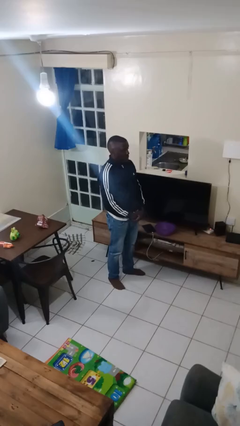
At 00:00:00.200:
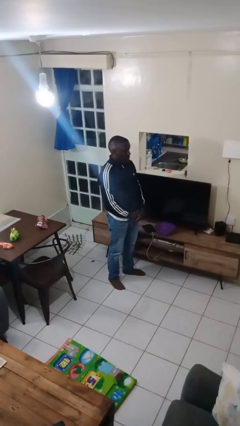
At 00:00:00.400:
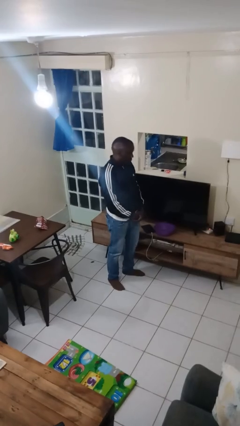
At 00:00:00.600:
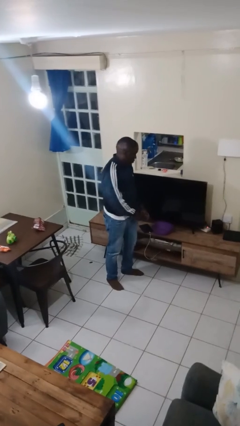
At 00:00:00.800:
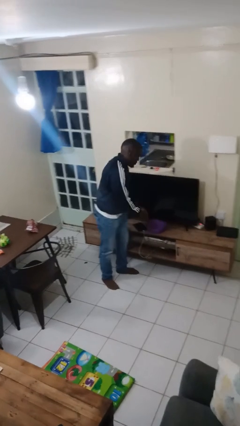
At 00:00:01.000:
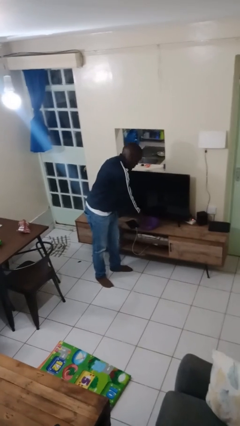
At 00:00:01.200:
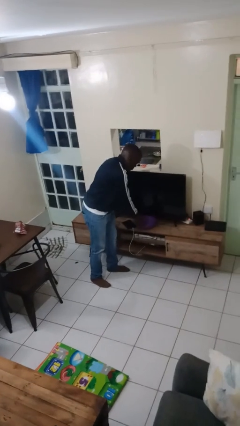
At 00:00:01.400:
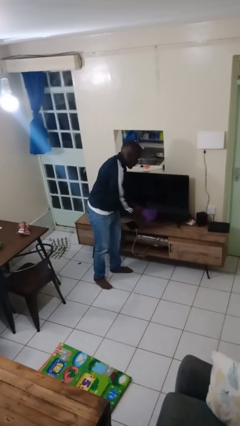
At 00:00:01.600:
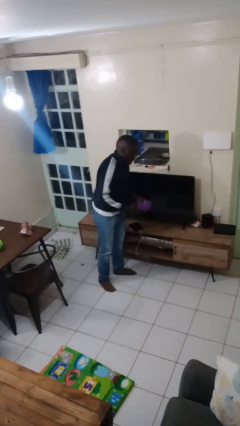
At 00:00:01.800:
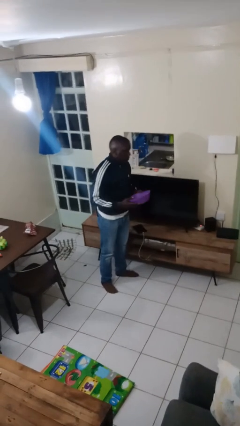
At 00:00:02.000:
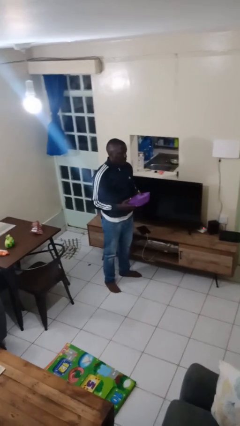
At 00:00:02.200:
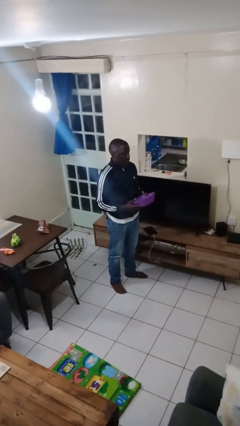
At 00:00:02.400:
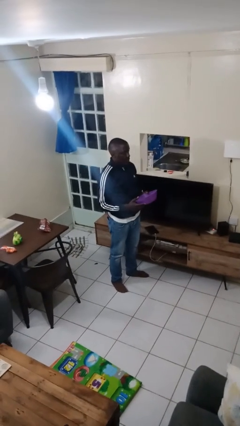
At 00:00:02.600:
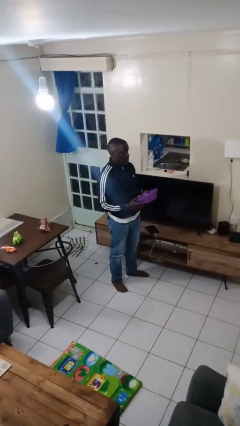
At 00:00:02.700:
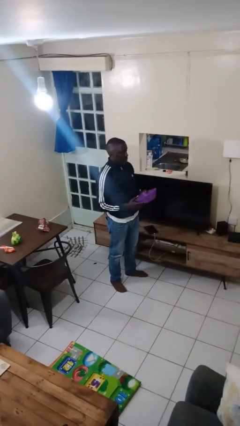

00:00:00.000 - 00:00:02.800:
person picks up object from countertop

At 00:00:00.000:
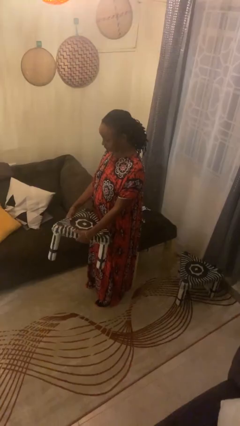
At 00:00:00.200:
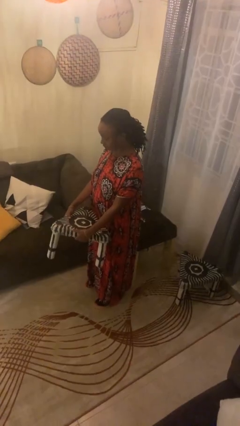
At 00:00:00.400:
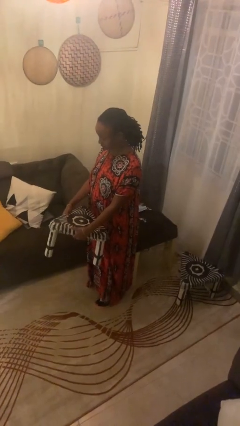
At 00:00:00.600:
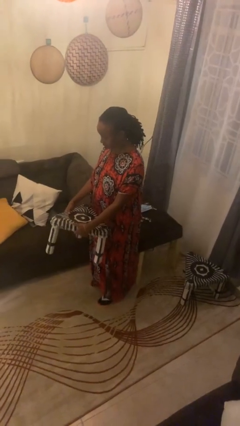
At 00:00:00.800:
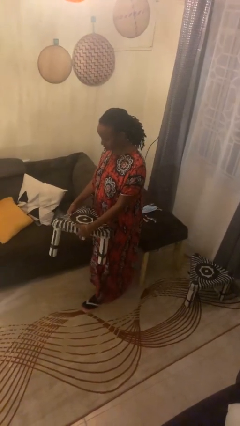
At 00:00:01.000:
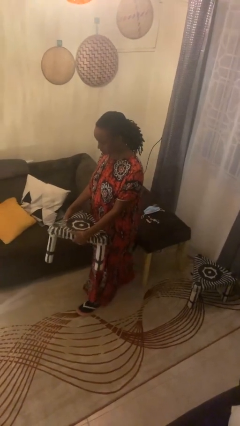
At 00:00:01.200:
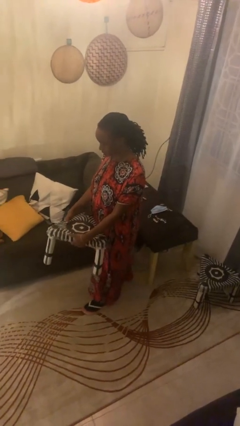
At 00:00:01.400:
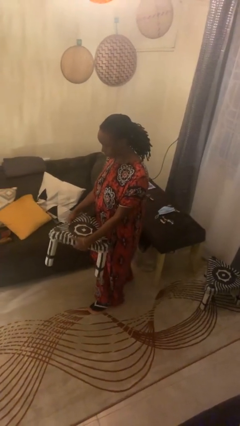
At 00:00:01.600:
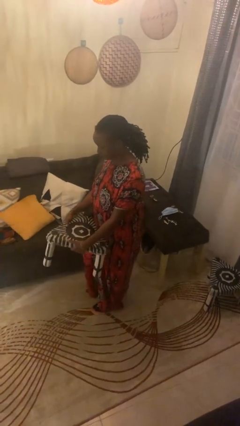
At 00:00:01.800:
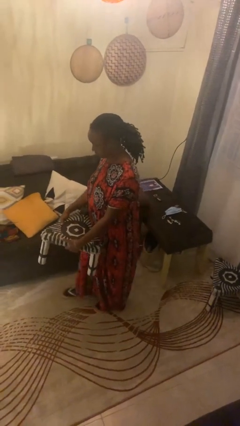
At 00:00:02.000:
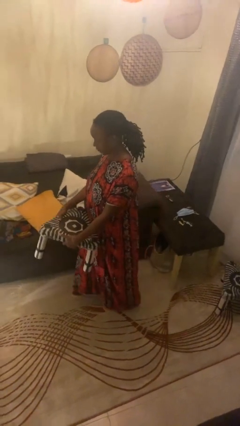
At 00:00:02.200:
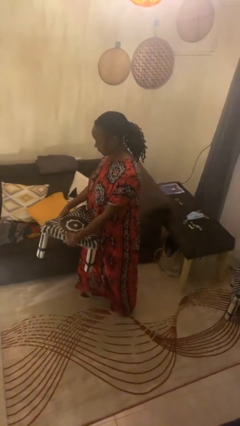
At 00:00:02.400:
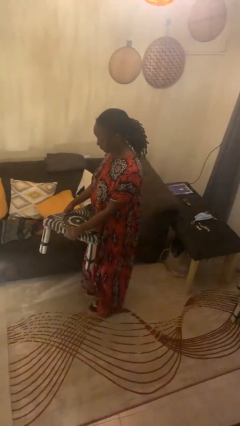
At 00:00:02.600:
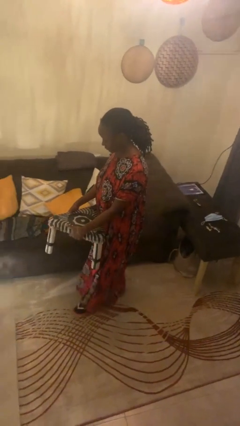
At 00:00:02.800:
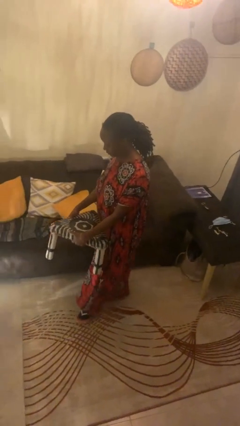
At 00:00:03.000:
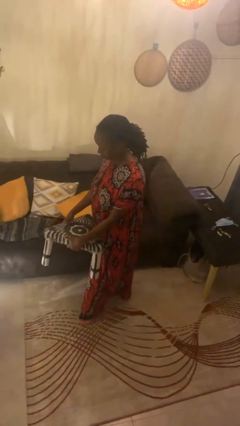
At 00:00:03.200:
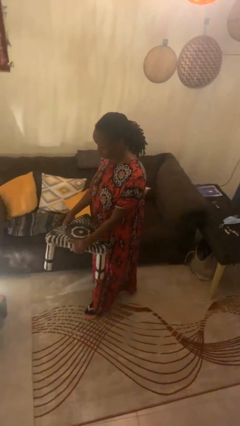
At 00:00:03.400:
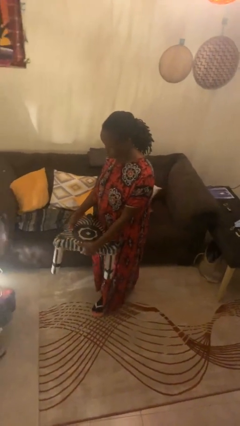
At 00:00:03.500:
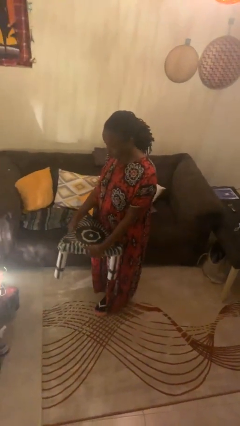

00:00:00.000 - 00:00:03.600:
person carries furniture

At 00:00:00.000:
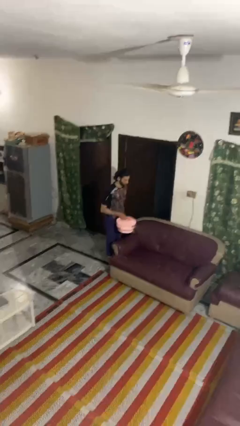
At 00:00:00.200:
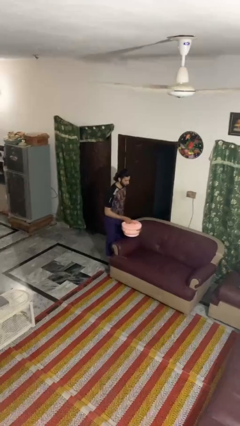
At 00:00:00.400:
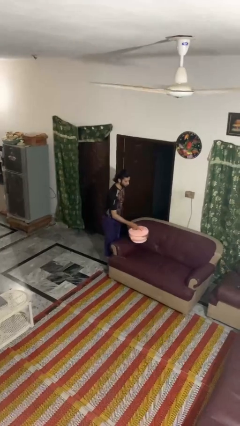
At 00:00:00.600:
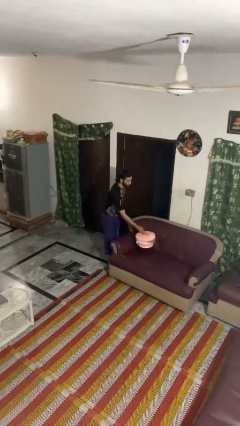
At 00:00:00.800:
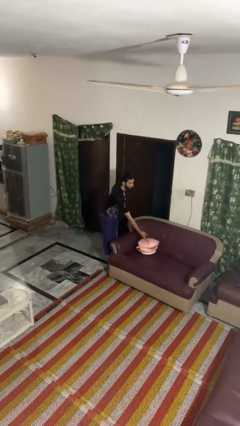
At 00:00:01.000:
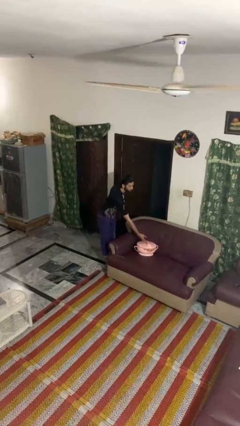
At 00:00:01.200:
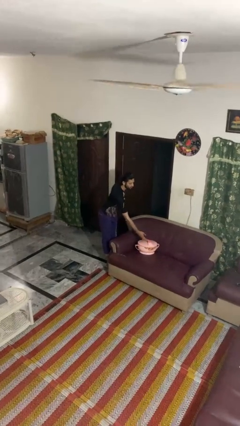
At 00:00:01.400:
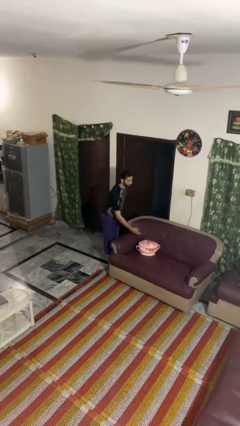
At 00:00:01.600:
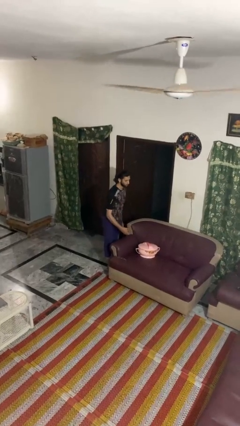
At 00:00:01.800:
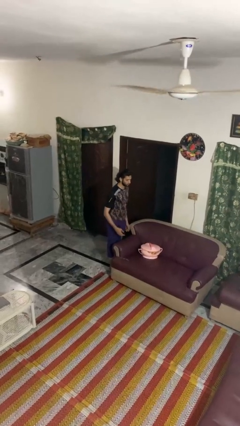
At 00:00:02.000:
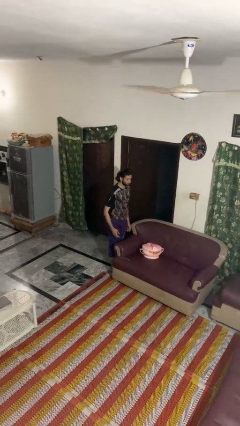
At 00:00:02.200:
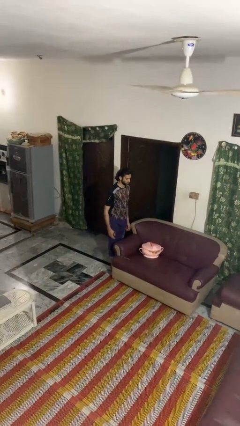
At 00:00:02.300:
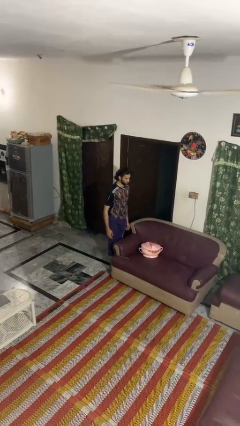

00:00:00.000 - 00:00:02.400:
person puts down object on couch

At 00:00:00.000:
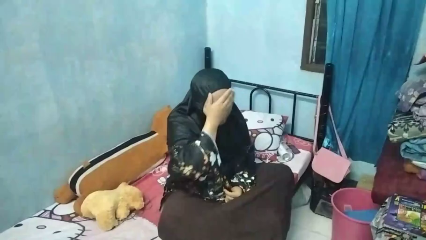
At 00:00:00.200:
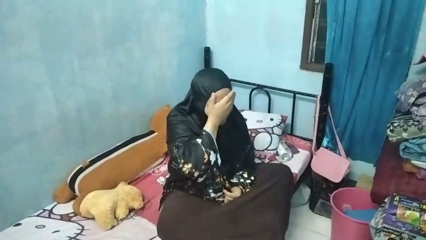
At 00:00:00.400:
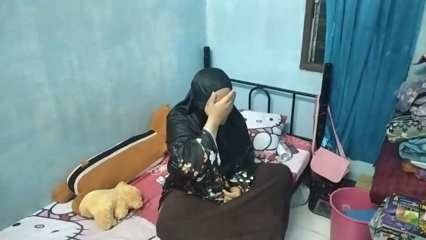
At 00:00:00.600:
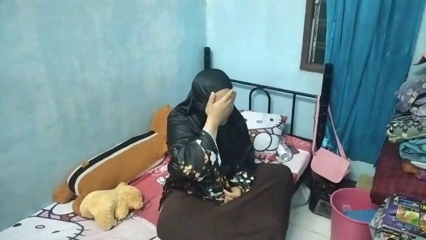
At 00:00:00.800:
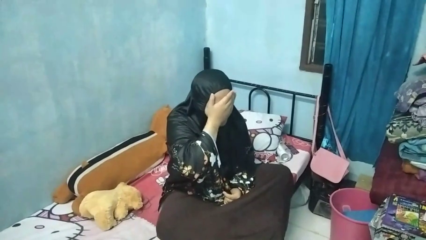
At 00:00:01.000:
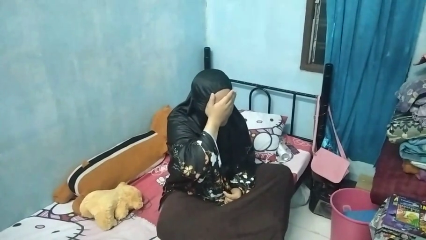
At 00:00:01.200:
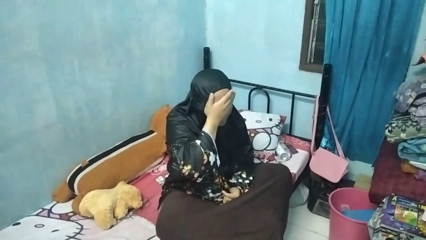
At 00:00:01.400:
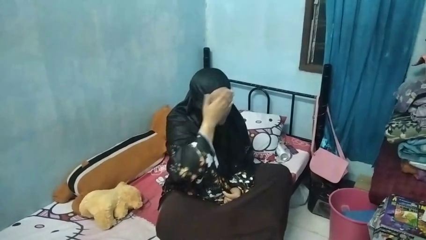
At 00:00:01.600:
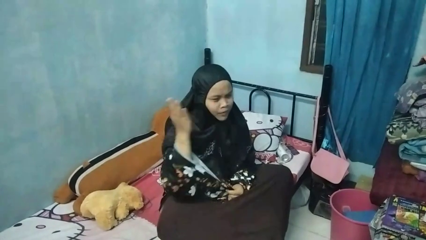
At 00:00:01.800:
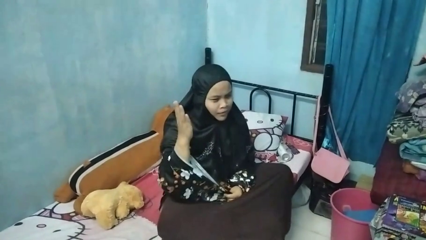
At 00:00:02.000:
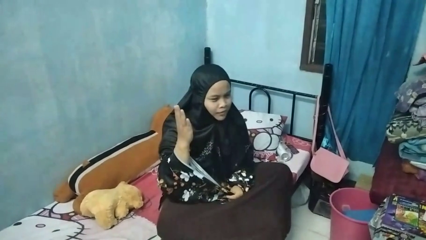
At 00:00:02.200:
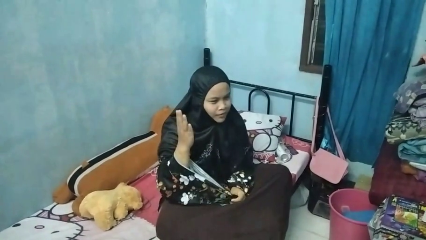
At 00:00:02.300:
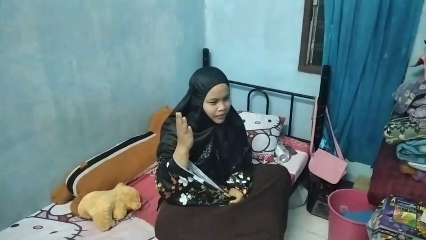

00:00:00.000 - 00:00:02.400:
person covers face with hands

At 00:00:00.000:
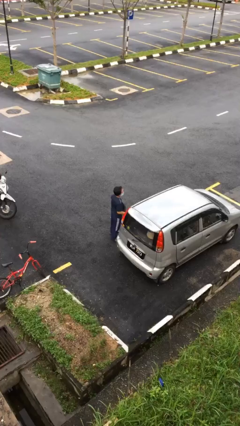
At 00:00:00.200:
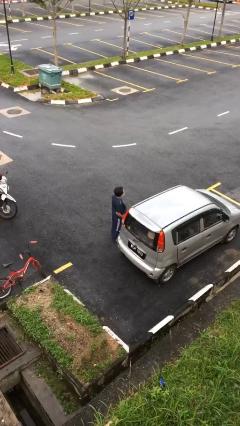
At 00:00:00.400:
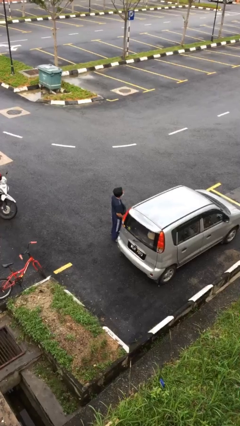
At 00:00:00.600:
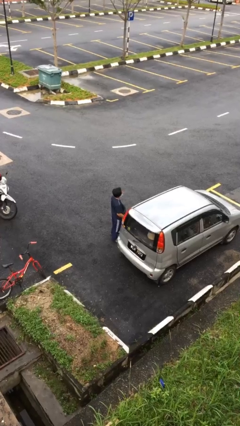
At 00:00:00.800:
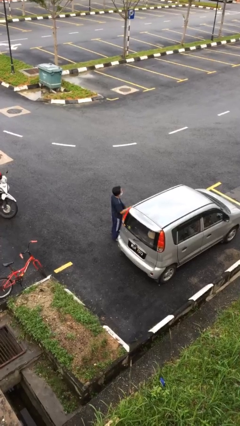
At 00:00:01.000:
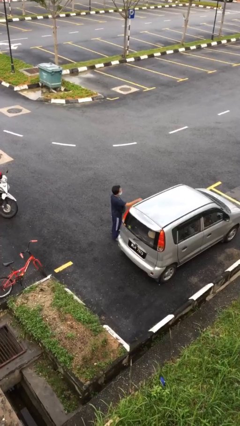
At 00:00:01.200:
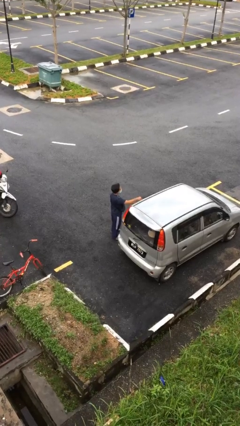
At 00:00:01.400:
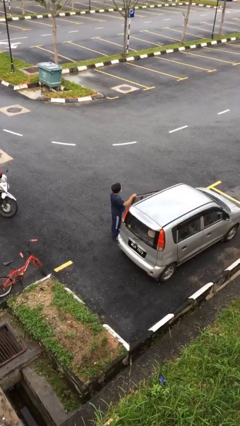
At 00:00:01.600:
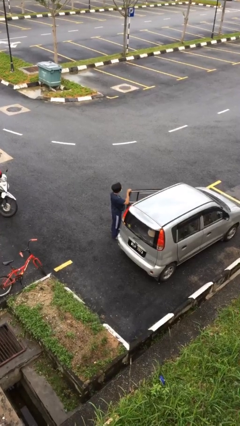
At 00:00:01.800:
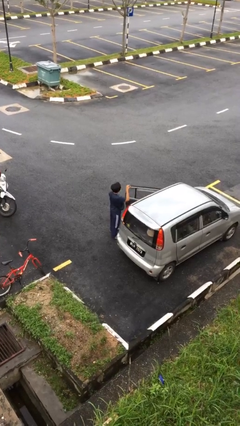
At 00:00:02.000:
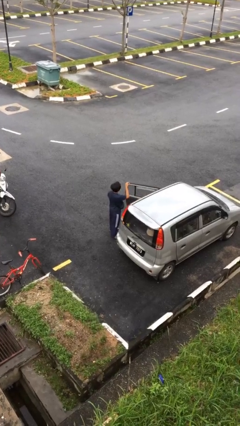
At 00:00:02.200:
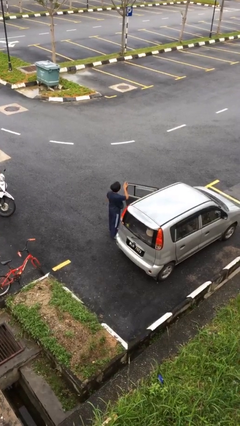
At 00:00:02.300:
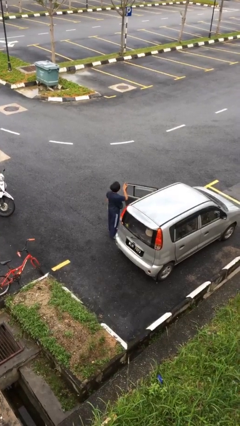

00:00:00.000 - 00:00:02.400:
person opens car door

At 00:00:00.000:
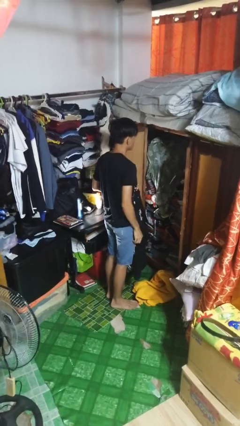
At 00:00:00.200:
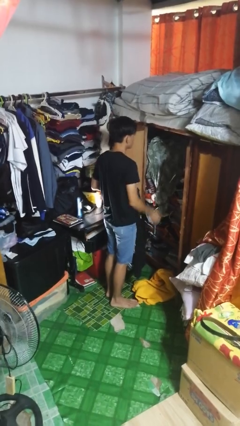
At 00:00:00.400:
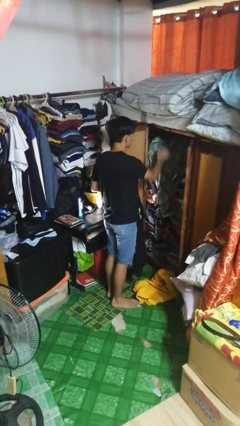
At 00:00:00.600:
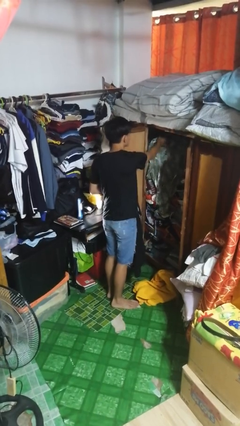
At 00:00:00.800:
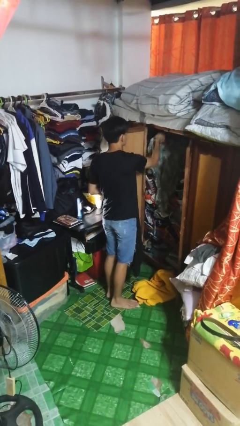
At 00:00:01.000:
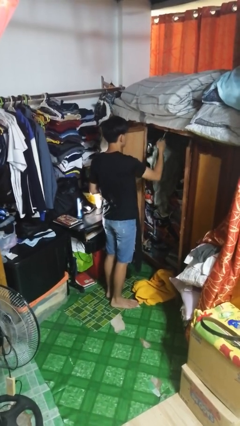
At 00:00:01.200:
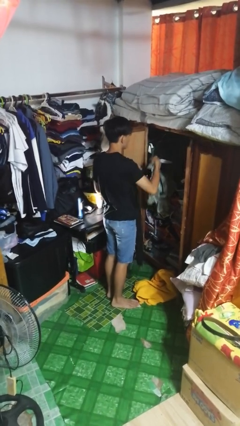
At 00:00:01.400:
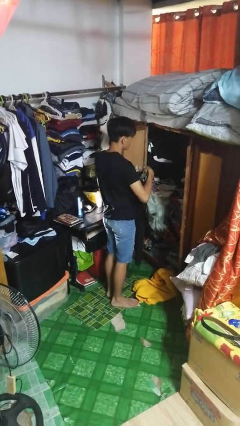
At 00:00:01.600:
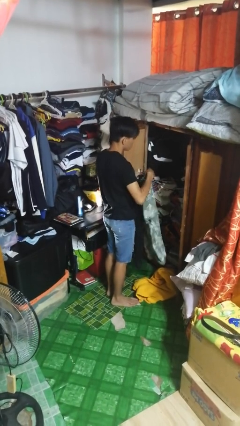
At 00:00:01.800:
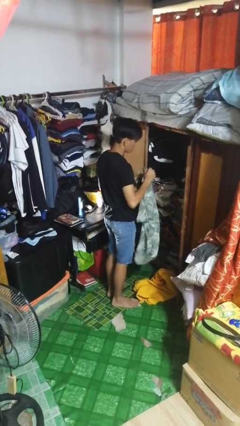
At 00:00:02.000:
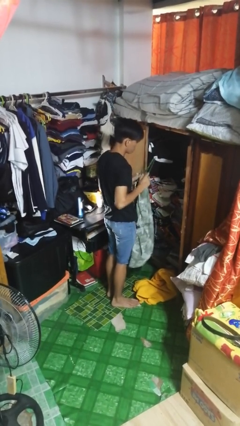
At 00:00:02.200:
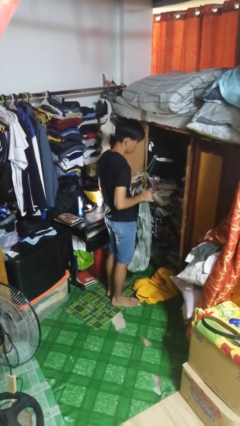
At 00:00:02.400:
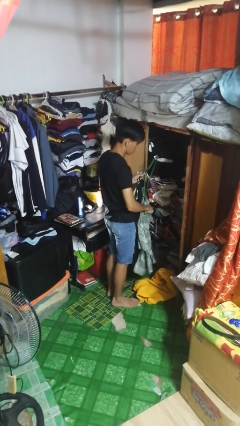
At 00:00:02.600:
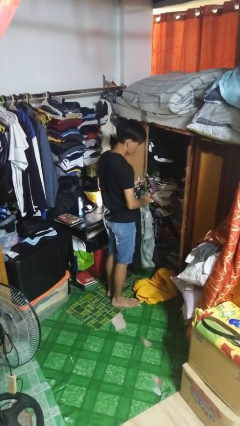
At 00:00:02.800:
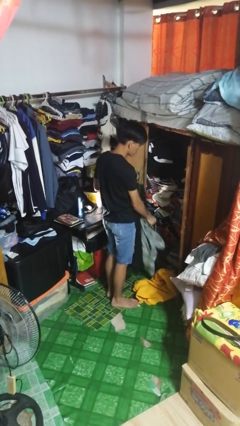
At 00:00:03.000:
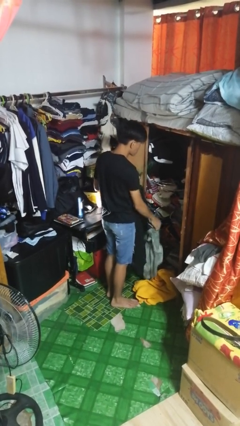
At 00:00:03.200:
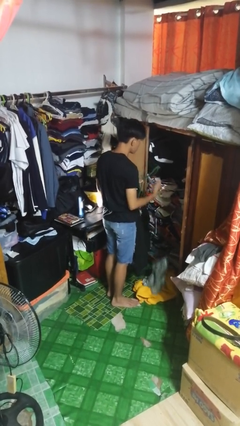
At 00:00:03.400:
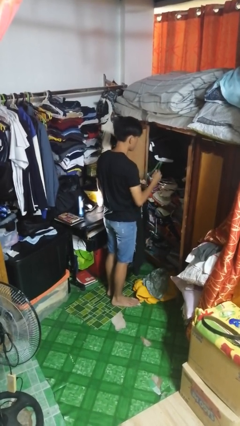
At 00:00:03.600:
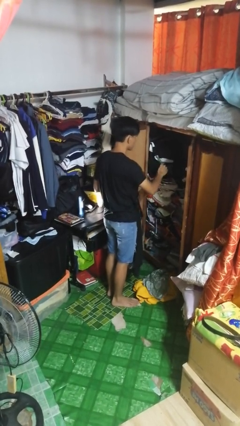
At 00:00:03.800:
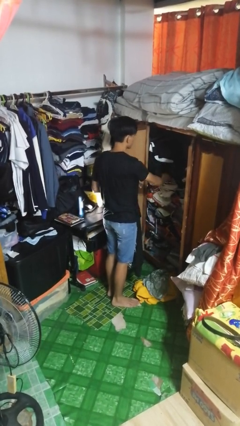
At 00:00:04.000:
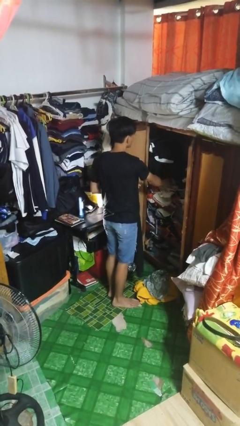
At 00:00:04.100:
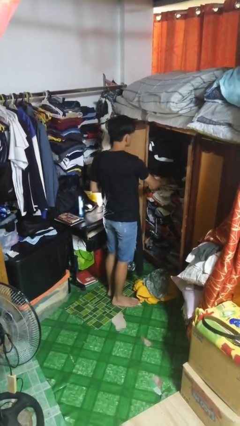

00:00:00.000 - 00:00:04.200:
person takes clothes from closet
